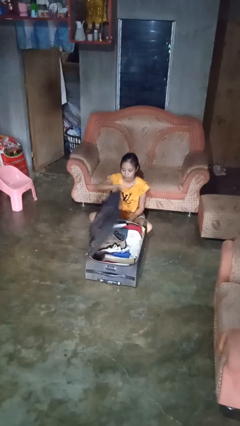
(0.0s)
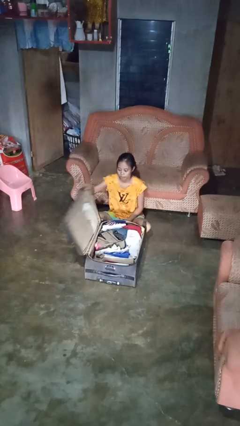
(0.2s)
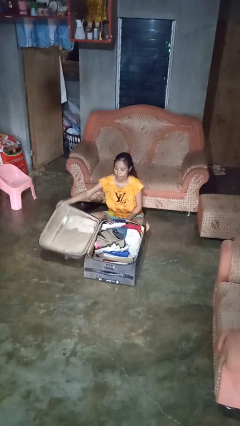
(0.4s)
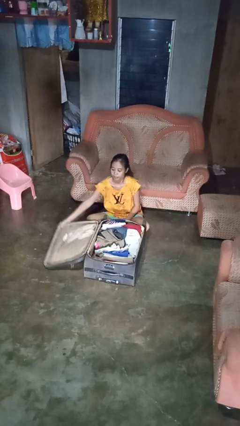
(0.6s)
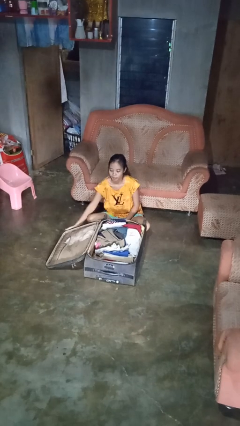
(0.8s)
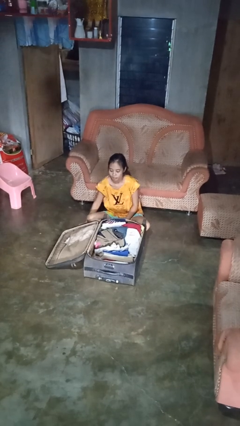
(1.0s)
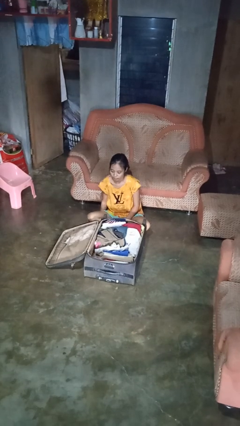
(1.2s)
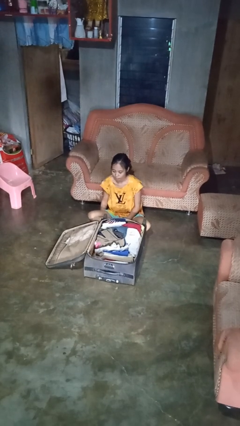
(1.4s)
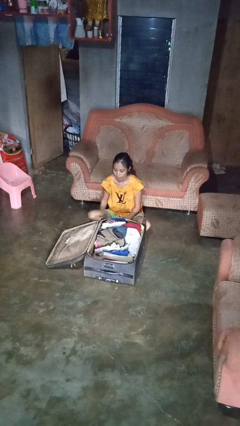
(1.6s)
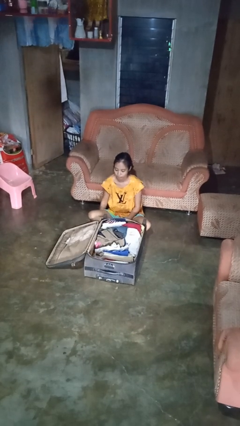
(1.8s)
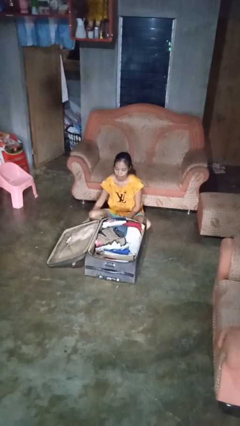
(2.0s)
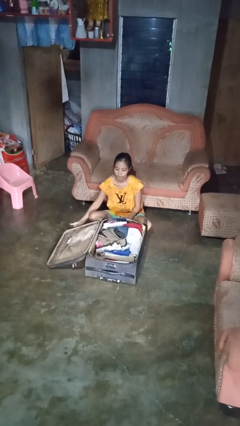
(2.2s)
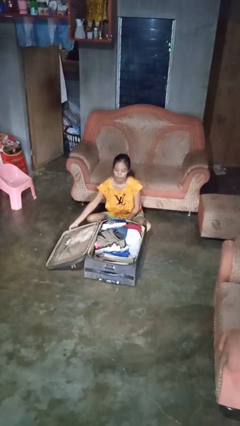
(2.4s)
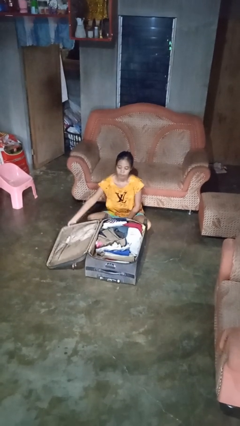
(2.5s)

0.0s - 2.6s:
person opens suitcase

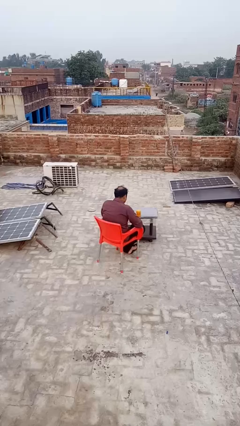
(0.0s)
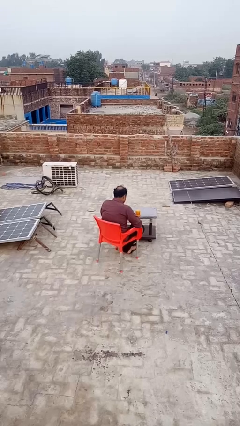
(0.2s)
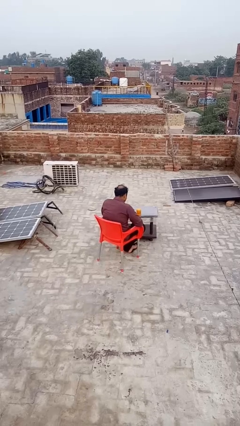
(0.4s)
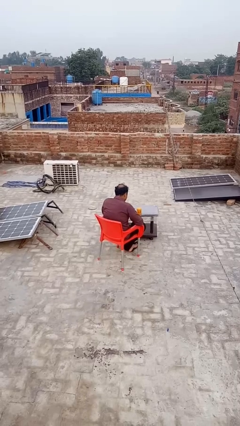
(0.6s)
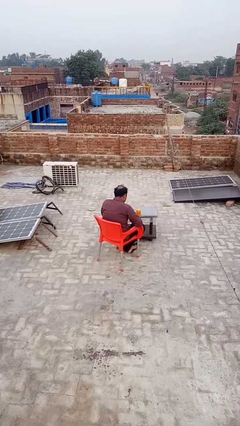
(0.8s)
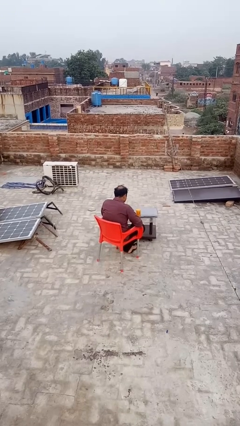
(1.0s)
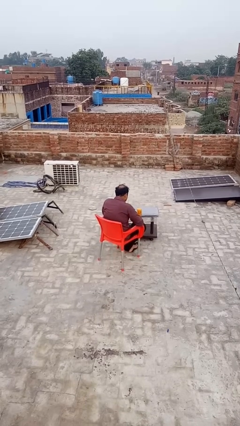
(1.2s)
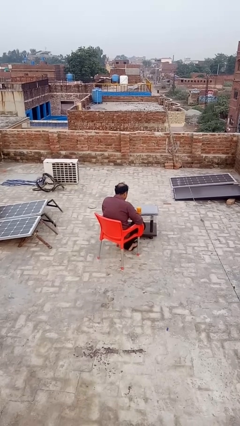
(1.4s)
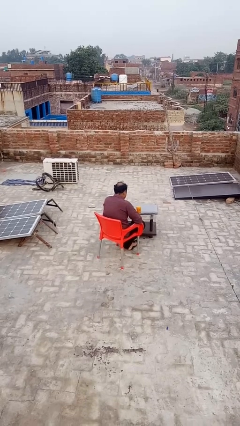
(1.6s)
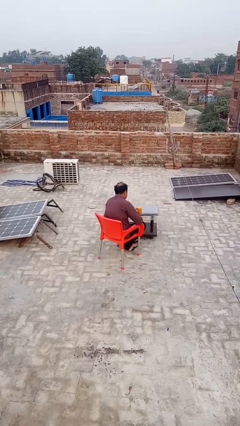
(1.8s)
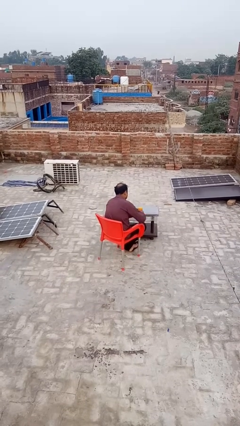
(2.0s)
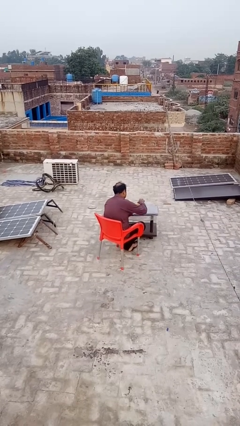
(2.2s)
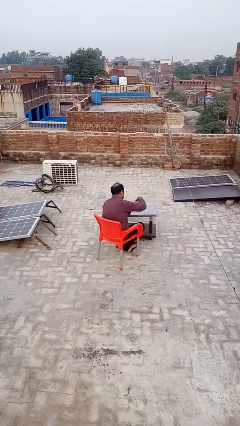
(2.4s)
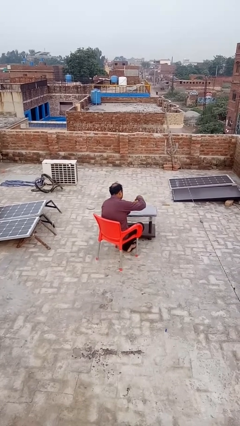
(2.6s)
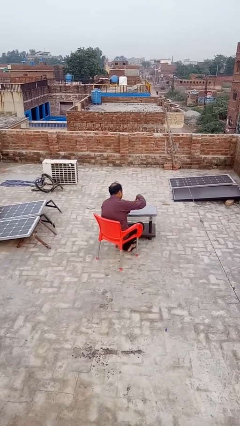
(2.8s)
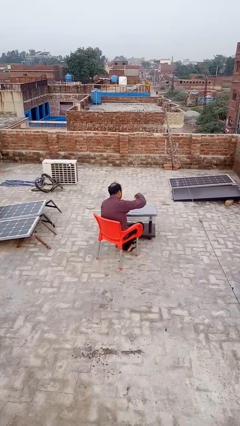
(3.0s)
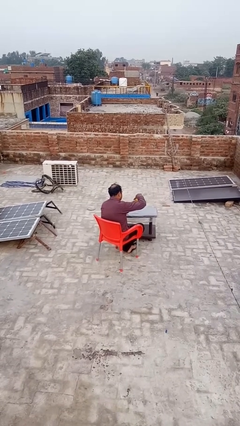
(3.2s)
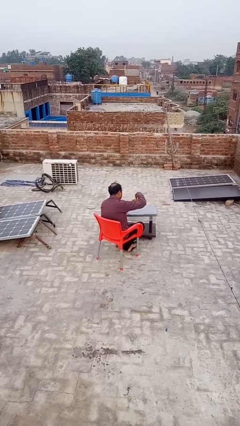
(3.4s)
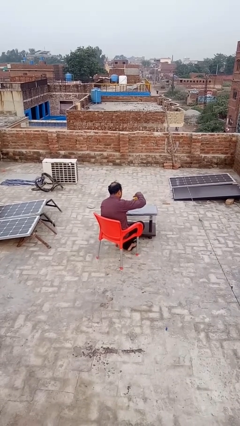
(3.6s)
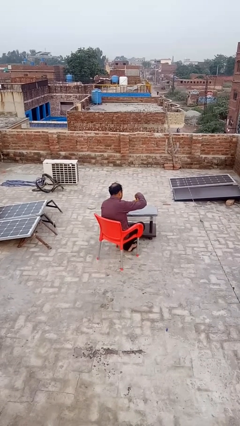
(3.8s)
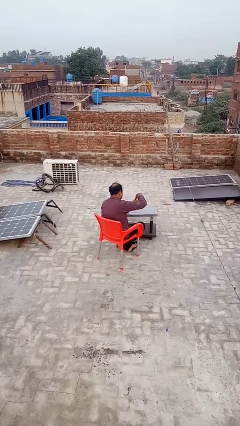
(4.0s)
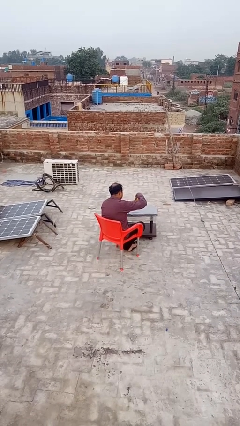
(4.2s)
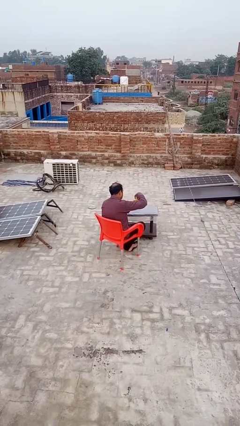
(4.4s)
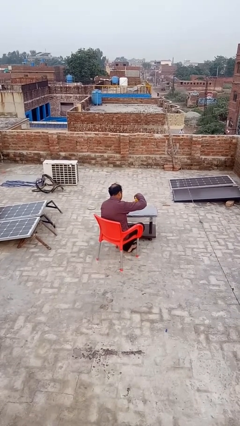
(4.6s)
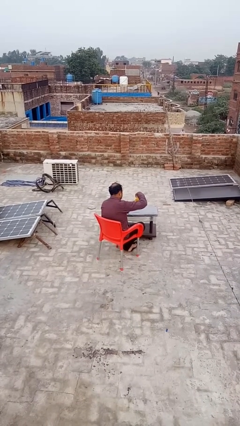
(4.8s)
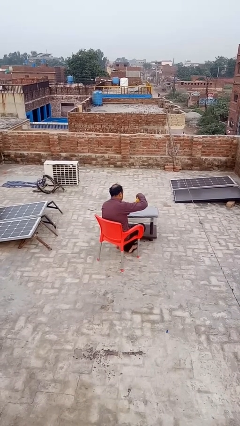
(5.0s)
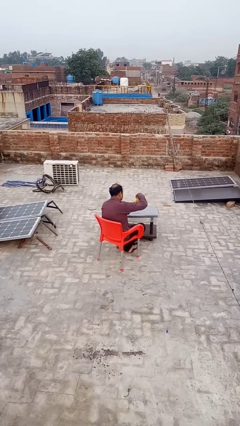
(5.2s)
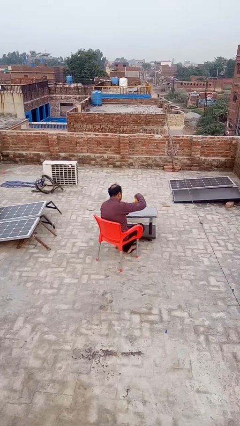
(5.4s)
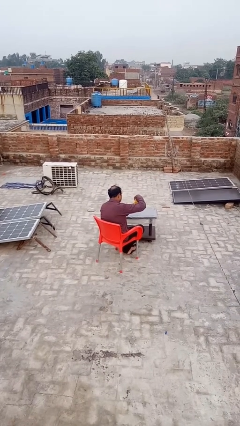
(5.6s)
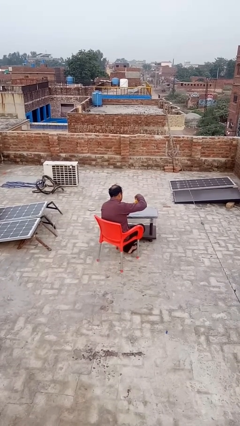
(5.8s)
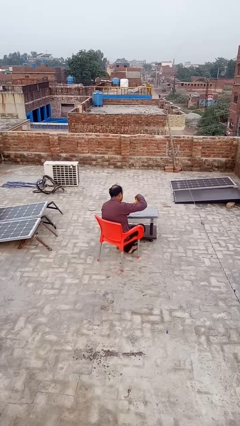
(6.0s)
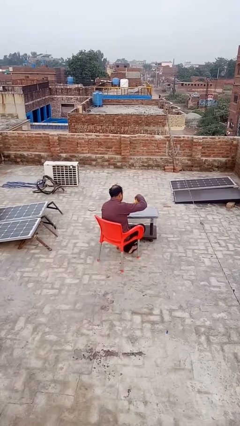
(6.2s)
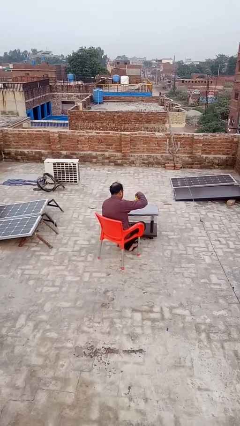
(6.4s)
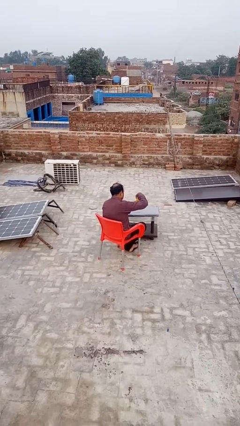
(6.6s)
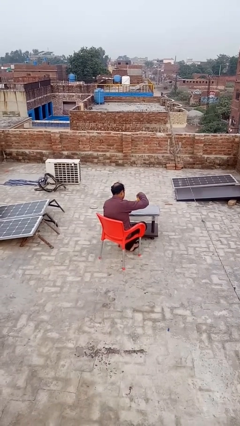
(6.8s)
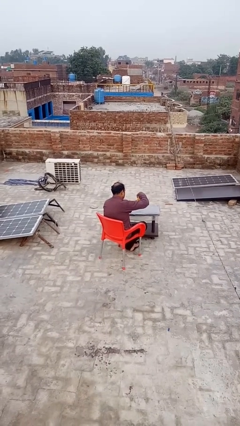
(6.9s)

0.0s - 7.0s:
person opens jar

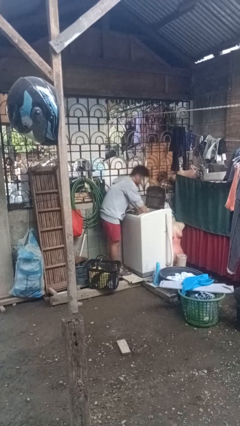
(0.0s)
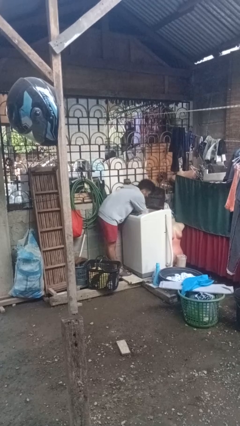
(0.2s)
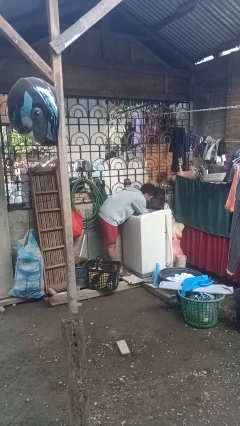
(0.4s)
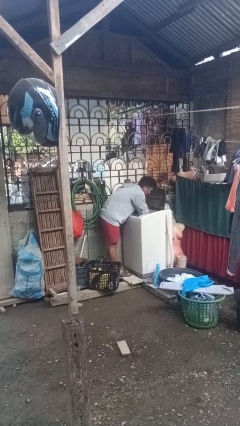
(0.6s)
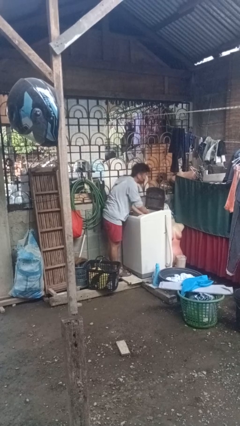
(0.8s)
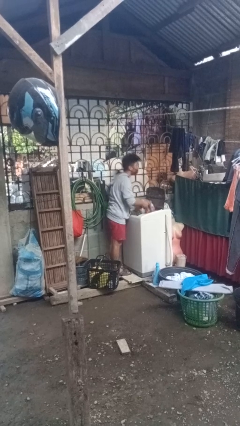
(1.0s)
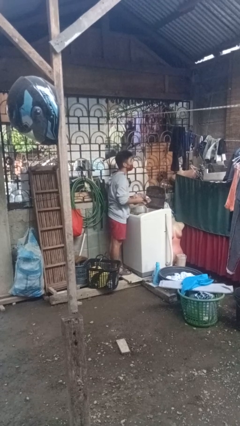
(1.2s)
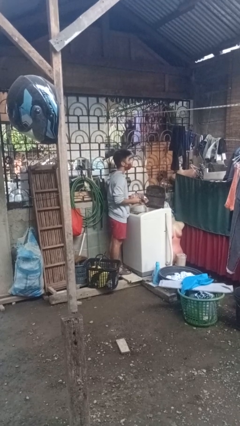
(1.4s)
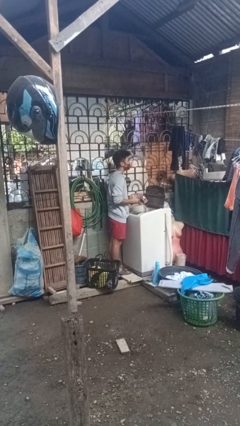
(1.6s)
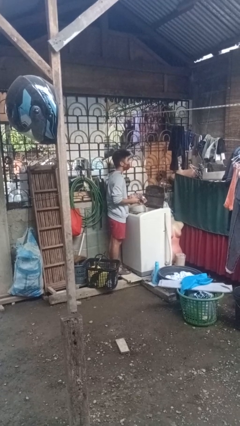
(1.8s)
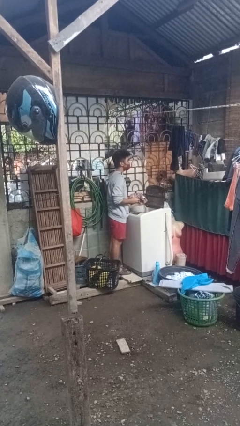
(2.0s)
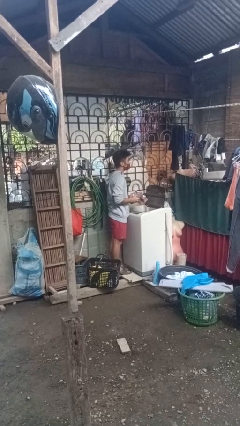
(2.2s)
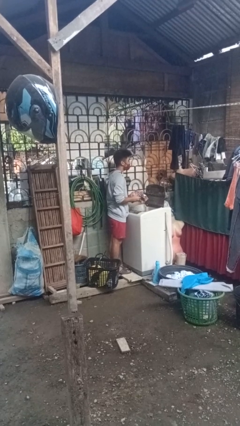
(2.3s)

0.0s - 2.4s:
person unloads clotheswasher

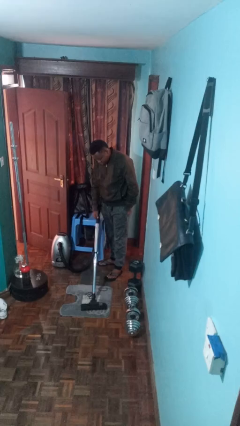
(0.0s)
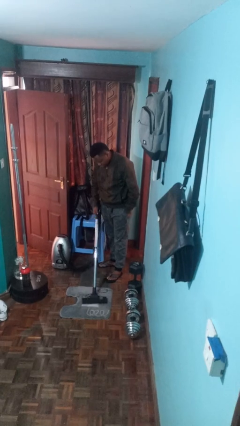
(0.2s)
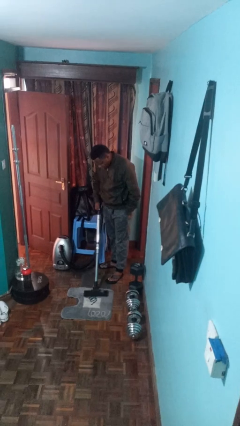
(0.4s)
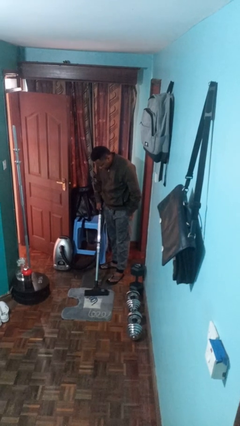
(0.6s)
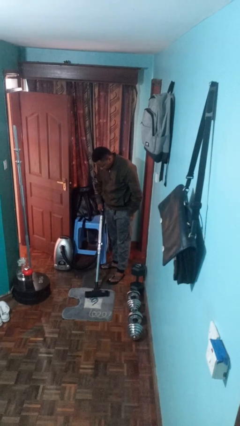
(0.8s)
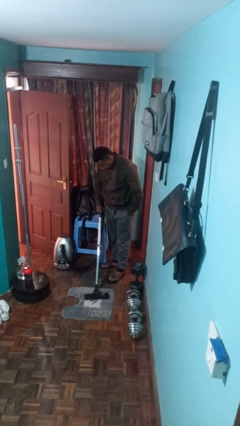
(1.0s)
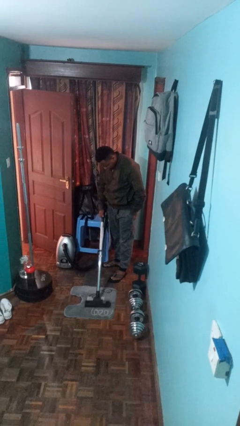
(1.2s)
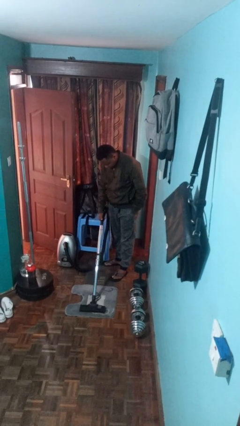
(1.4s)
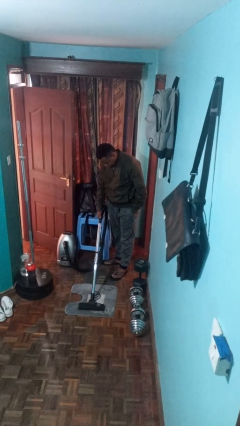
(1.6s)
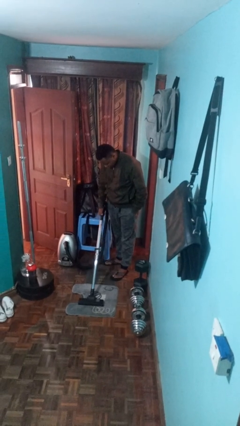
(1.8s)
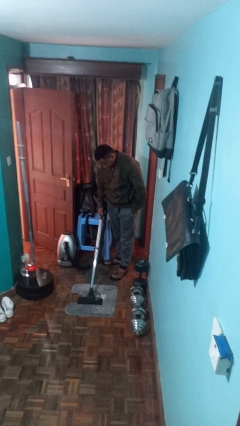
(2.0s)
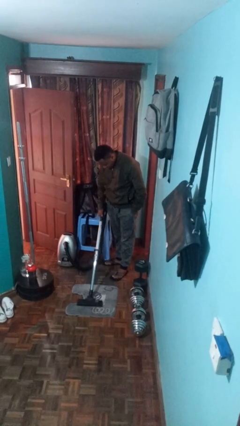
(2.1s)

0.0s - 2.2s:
person vacuums carpet

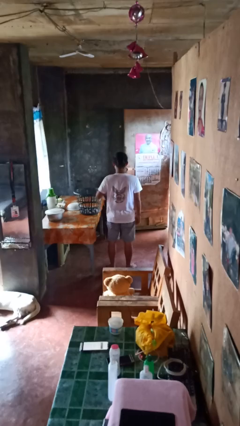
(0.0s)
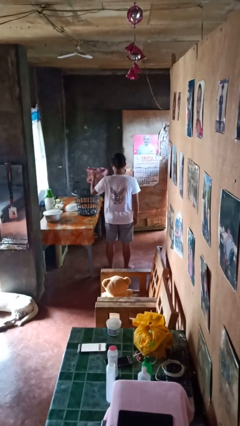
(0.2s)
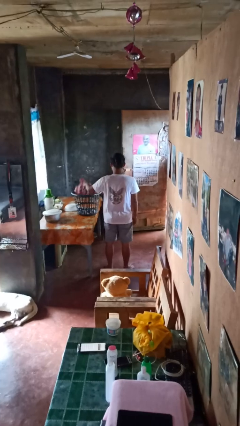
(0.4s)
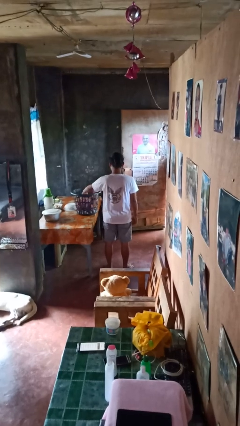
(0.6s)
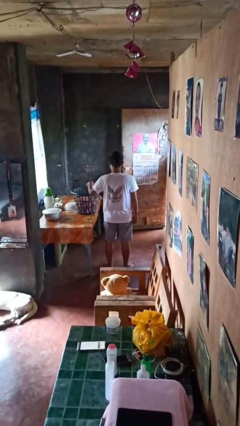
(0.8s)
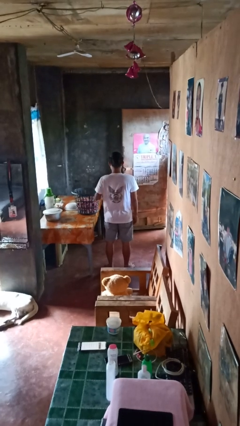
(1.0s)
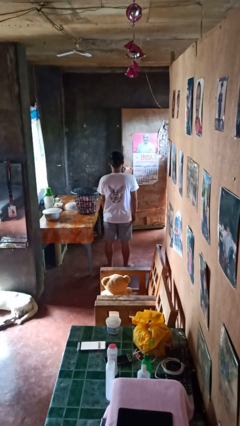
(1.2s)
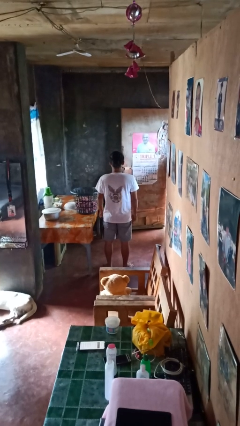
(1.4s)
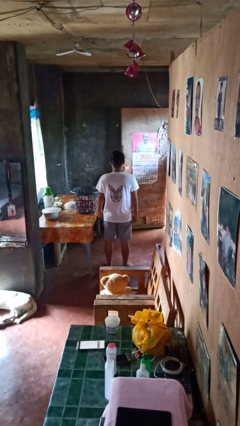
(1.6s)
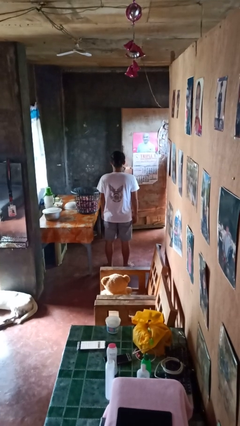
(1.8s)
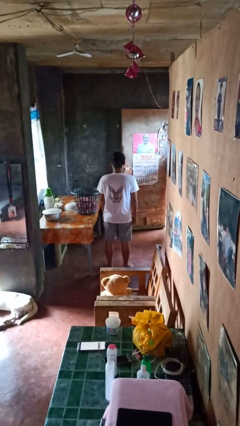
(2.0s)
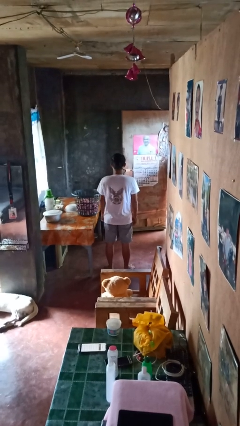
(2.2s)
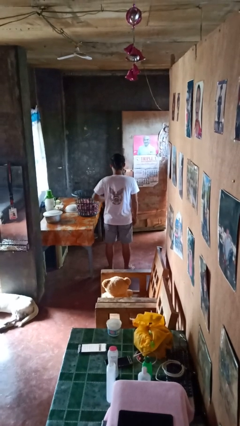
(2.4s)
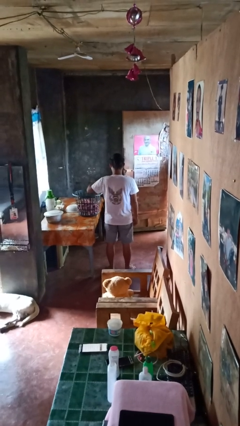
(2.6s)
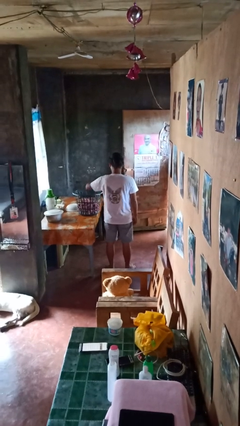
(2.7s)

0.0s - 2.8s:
person puts object into basket

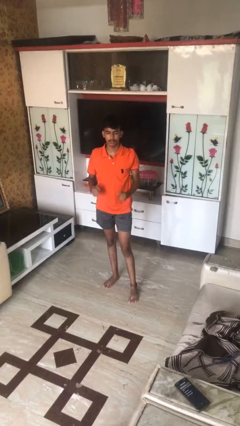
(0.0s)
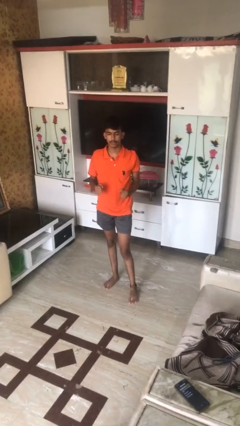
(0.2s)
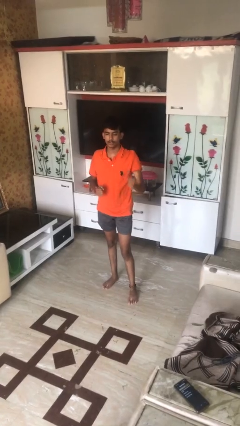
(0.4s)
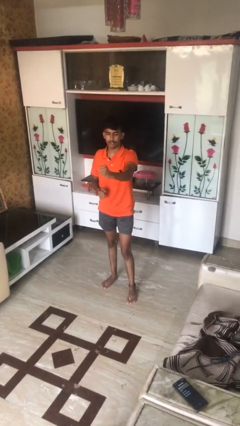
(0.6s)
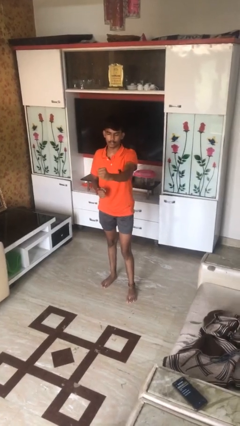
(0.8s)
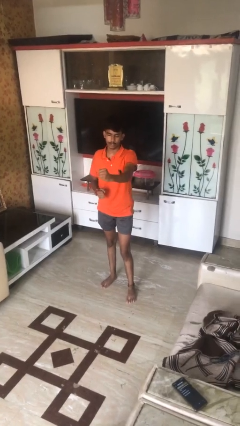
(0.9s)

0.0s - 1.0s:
person punches
